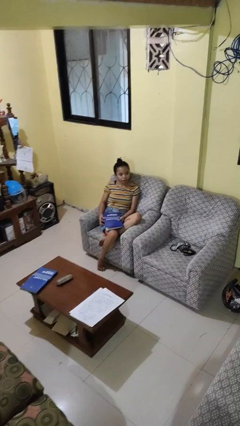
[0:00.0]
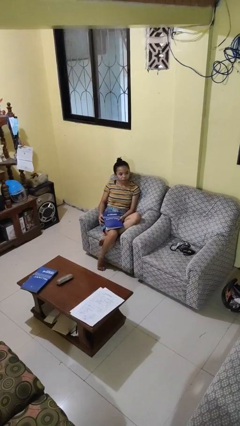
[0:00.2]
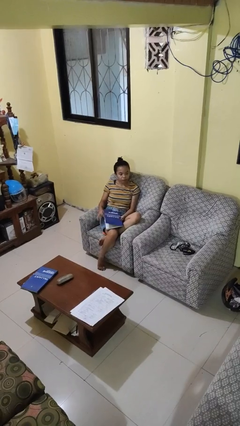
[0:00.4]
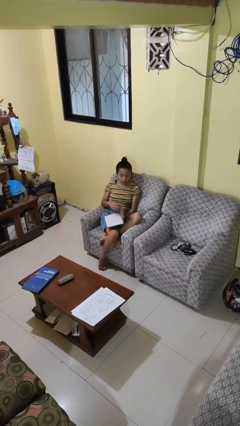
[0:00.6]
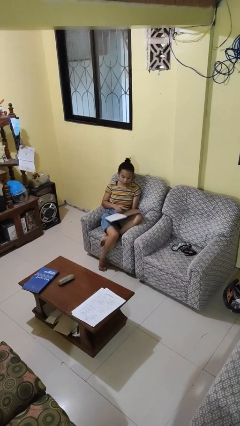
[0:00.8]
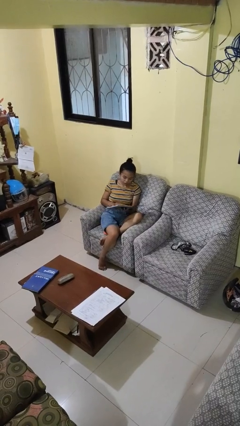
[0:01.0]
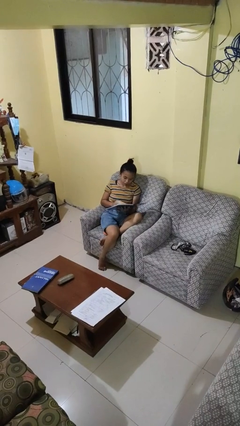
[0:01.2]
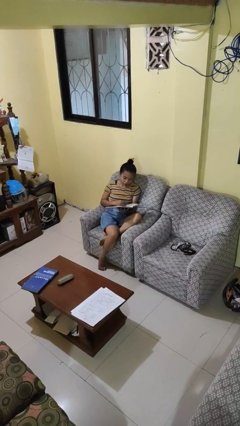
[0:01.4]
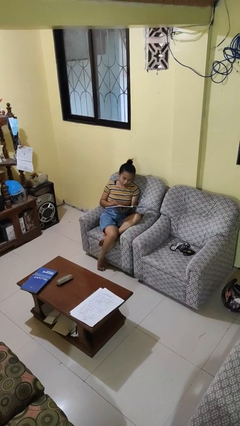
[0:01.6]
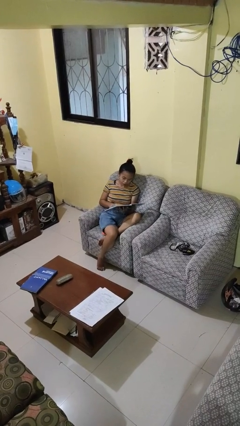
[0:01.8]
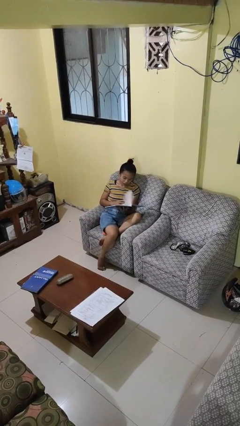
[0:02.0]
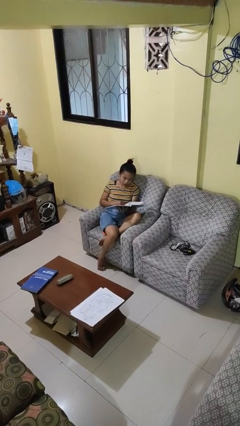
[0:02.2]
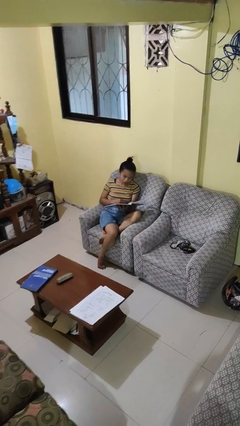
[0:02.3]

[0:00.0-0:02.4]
person reads book

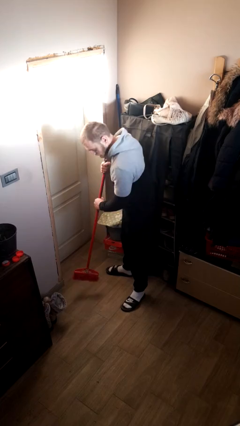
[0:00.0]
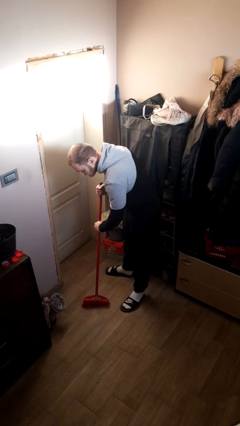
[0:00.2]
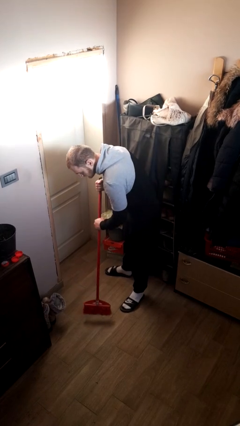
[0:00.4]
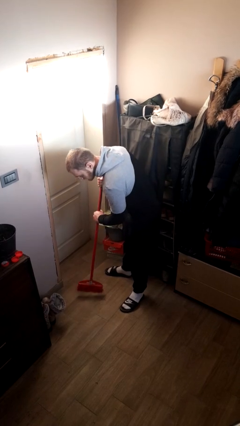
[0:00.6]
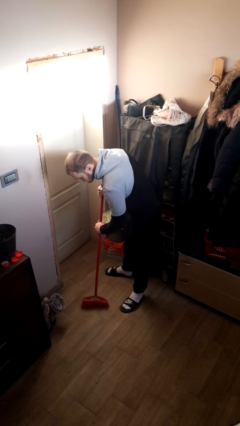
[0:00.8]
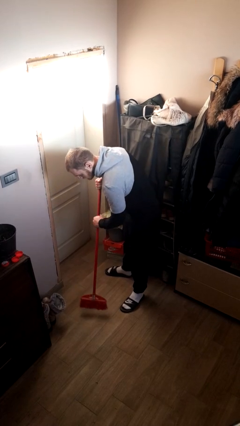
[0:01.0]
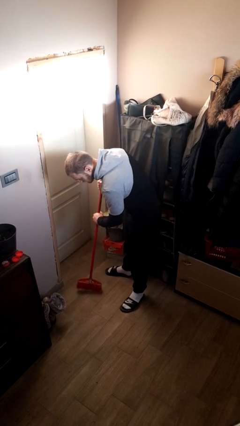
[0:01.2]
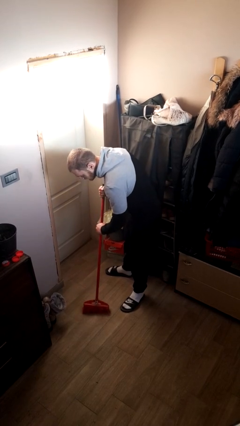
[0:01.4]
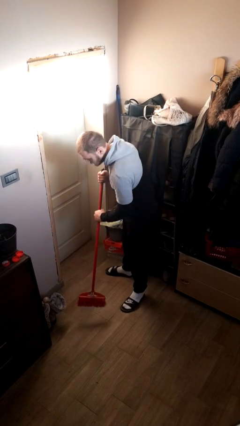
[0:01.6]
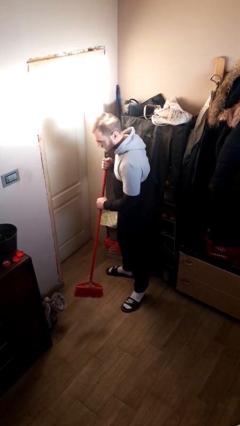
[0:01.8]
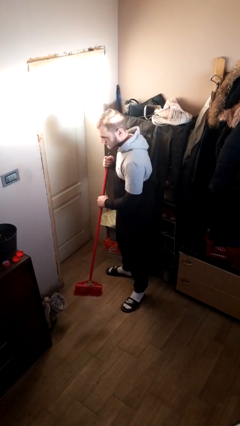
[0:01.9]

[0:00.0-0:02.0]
person sweeps floor

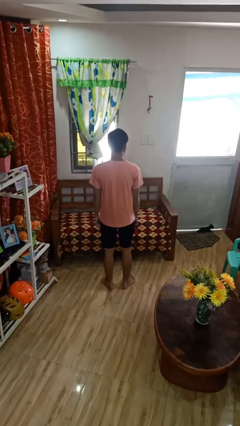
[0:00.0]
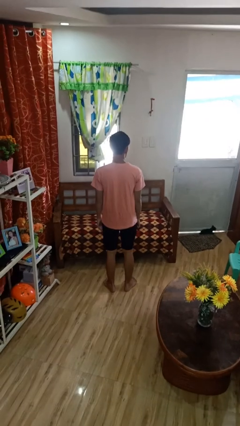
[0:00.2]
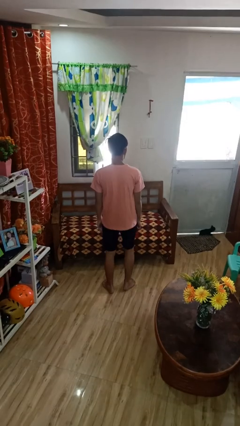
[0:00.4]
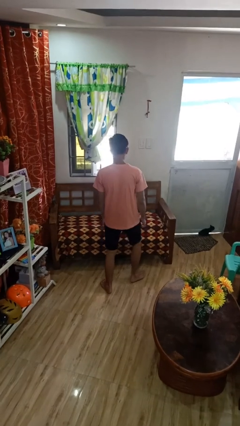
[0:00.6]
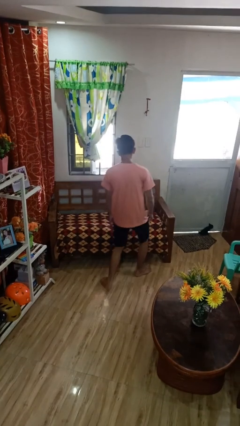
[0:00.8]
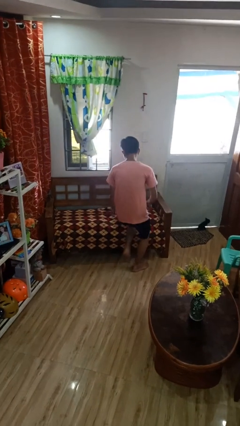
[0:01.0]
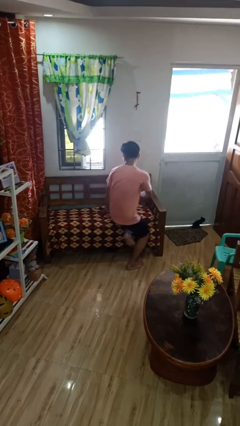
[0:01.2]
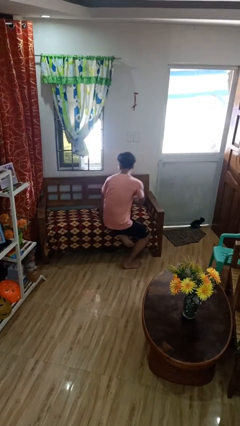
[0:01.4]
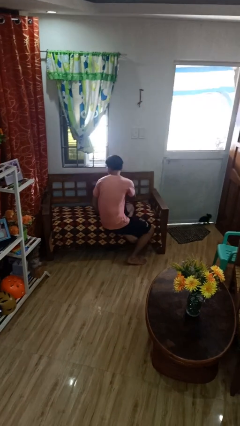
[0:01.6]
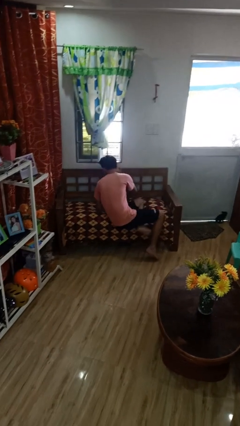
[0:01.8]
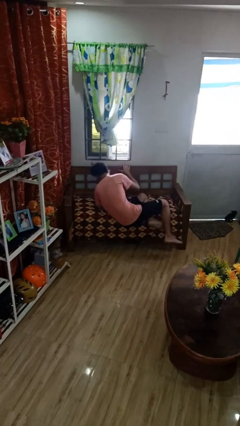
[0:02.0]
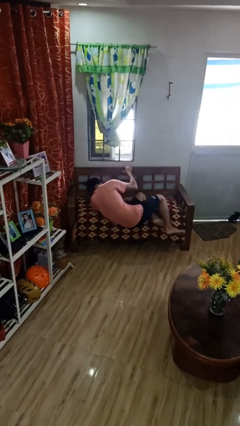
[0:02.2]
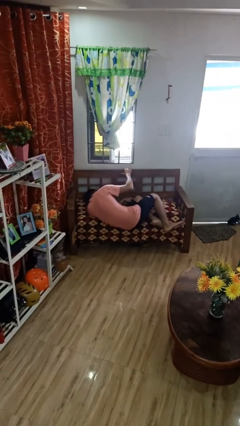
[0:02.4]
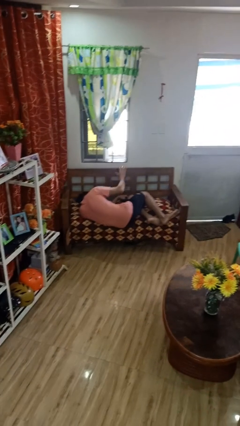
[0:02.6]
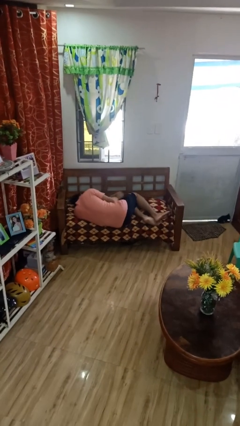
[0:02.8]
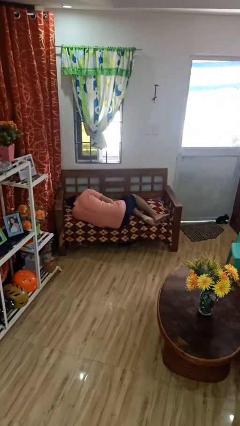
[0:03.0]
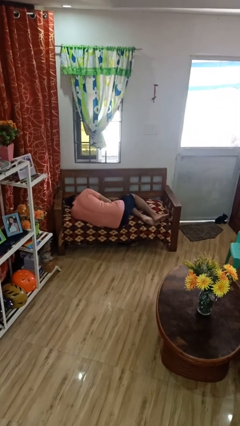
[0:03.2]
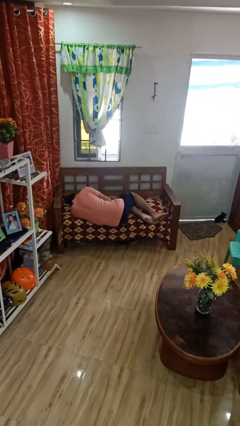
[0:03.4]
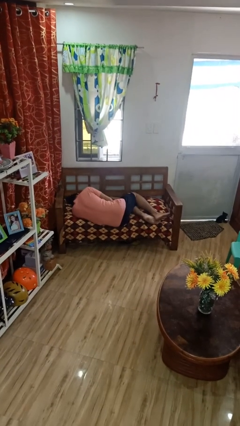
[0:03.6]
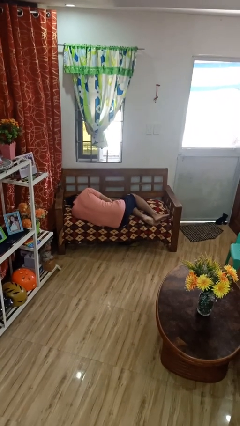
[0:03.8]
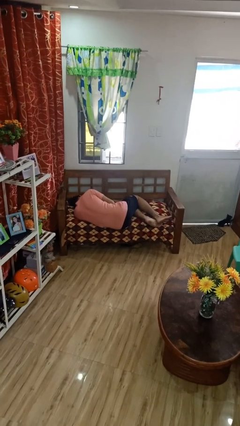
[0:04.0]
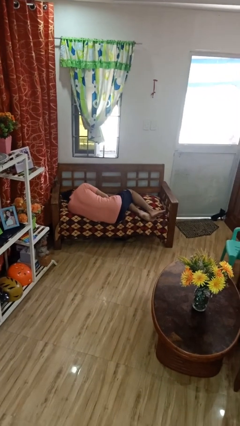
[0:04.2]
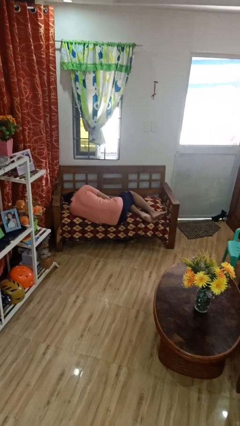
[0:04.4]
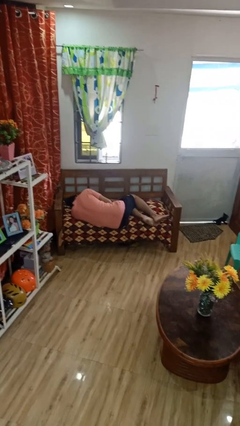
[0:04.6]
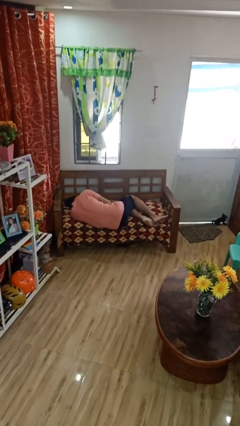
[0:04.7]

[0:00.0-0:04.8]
person lies down on couch

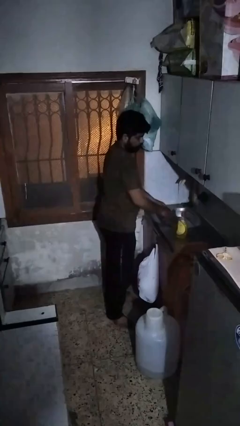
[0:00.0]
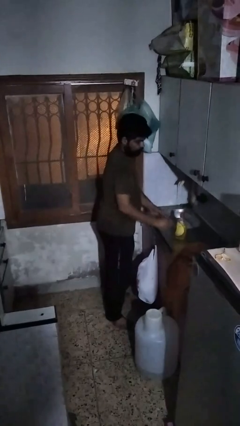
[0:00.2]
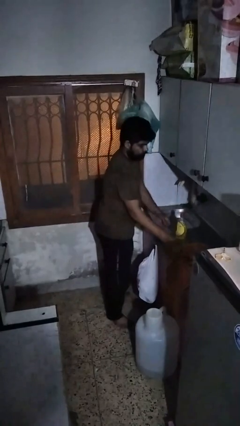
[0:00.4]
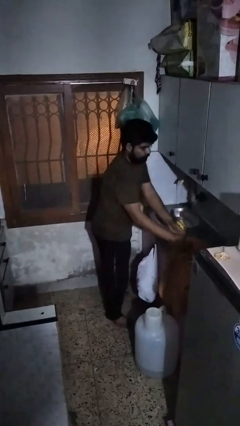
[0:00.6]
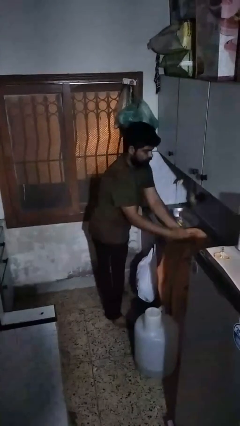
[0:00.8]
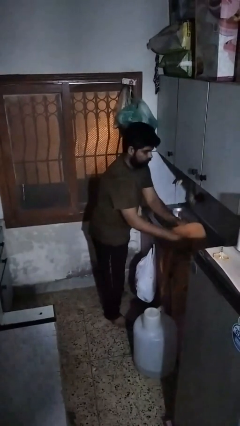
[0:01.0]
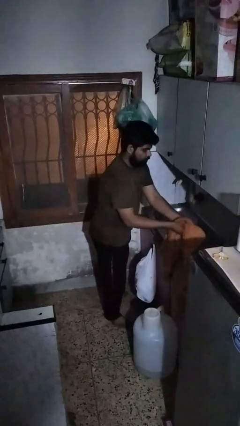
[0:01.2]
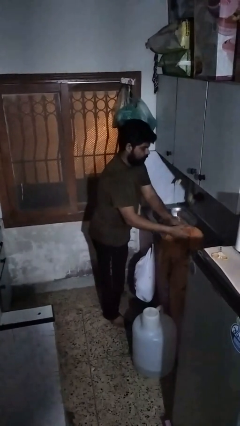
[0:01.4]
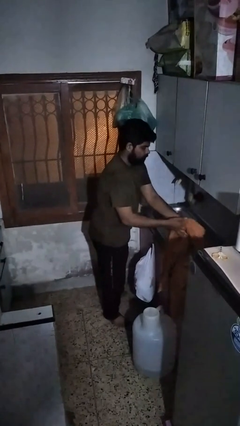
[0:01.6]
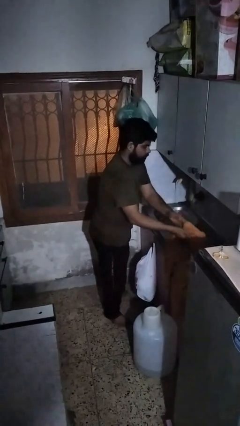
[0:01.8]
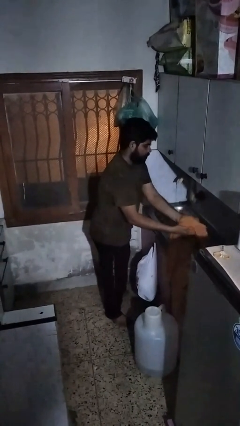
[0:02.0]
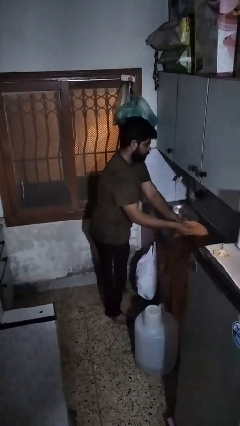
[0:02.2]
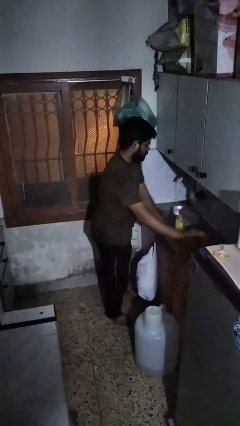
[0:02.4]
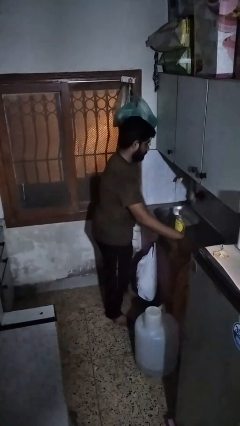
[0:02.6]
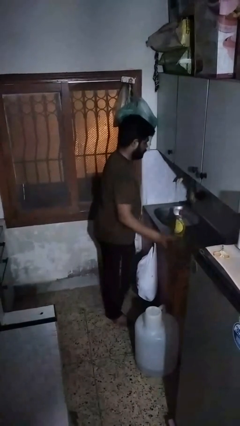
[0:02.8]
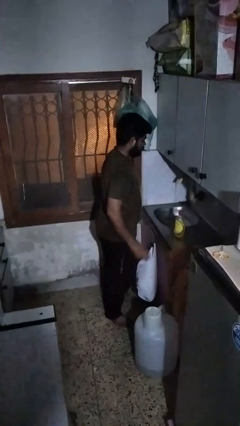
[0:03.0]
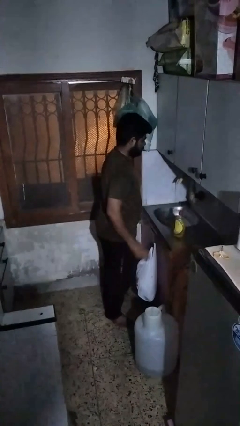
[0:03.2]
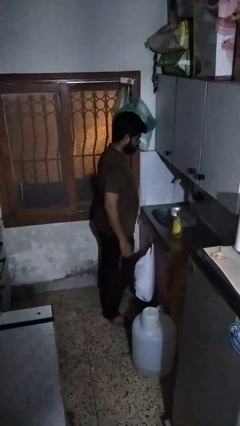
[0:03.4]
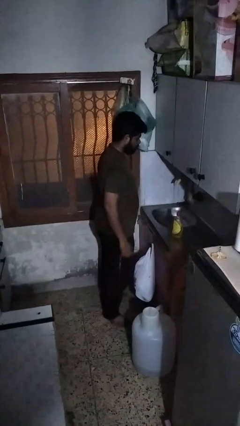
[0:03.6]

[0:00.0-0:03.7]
person dries hands with towel

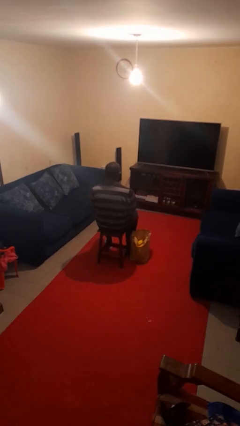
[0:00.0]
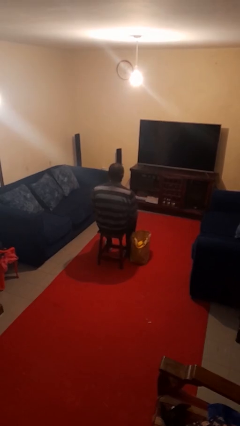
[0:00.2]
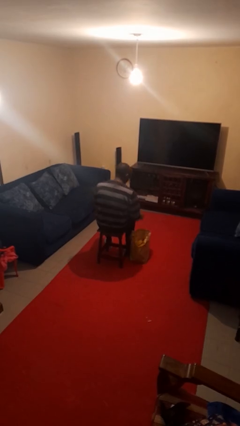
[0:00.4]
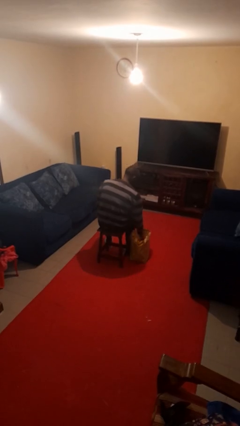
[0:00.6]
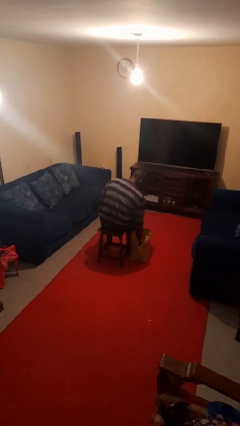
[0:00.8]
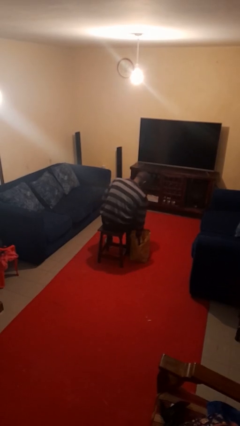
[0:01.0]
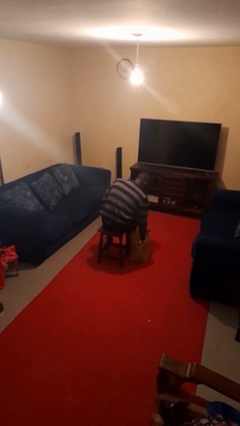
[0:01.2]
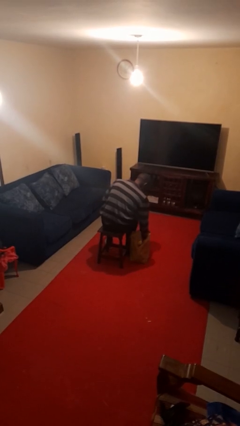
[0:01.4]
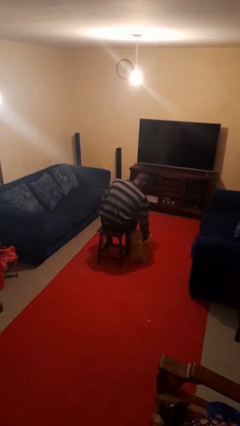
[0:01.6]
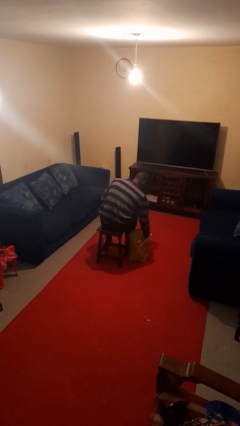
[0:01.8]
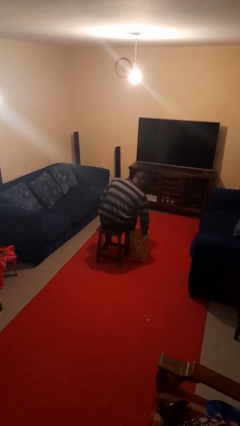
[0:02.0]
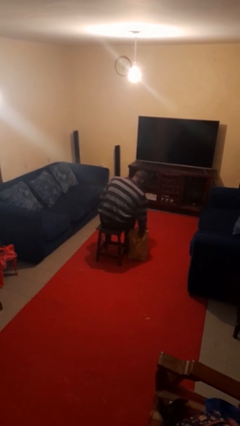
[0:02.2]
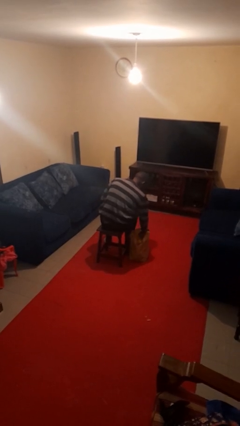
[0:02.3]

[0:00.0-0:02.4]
person searches in bag

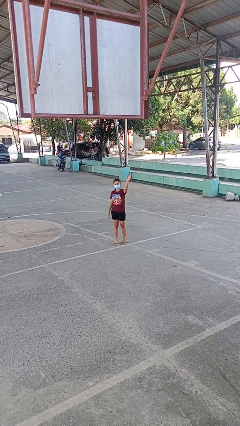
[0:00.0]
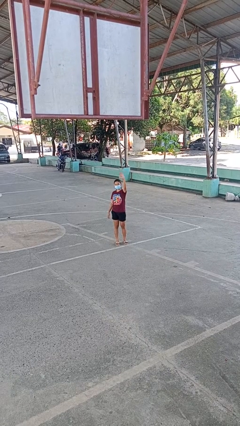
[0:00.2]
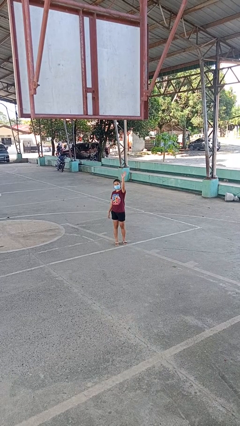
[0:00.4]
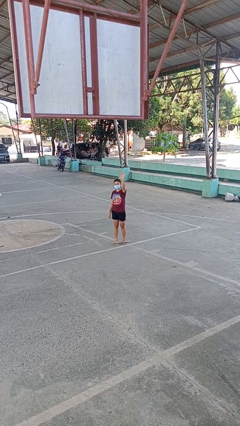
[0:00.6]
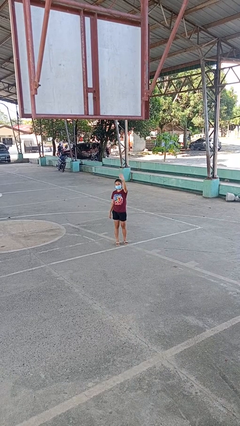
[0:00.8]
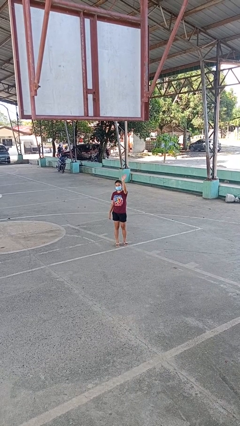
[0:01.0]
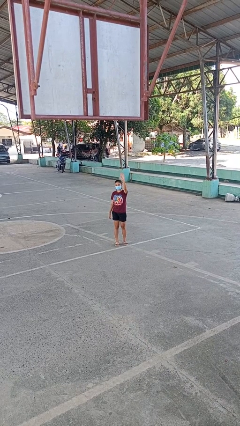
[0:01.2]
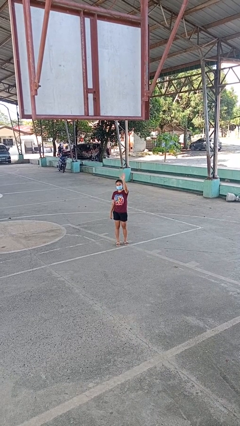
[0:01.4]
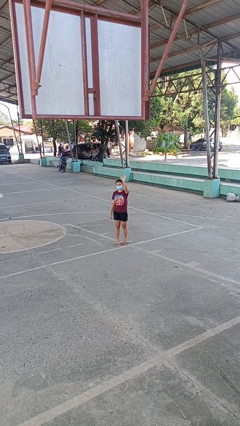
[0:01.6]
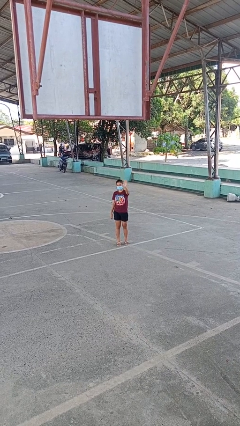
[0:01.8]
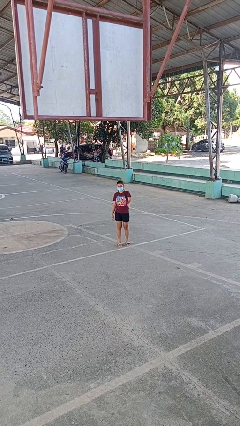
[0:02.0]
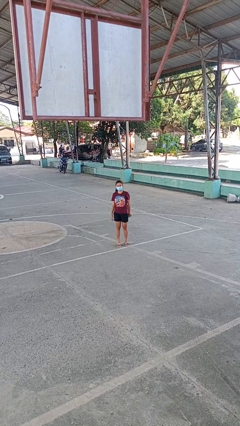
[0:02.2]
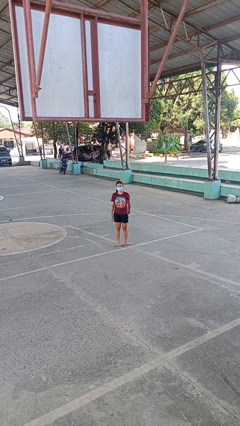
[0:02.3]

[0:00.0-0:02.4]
person waves at person

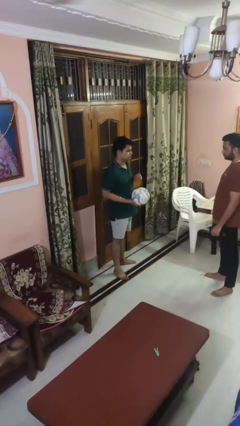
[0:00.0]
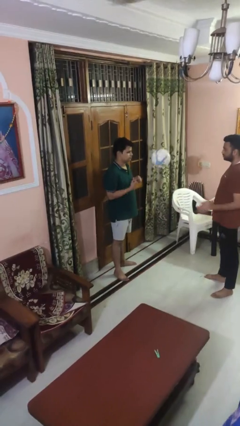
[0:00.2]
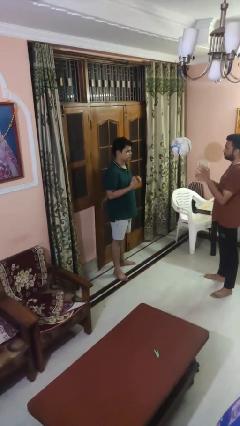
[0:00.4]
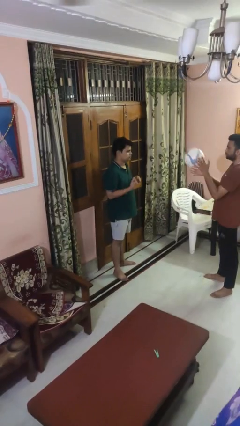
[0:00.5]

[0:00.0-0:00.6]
person throws object to person
